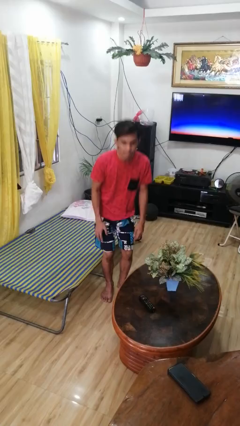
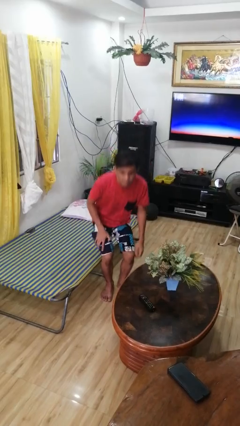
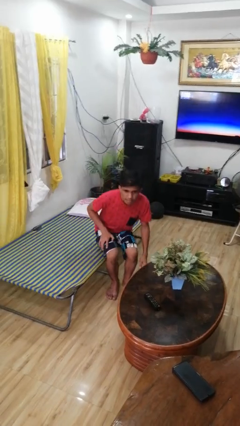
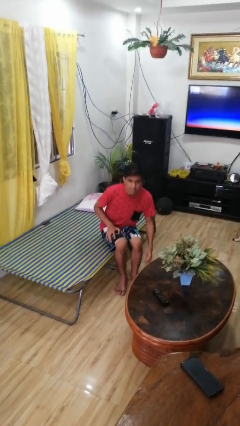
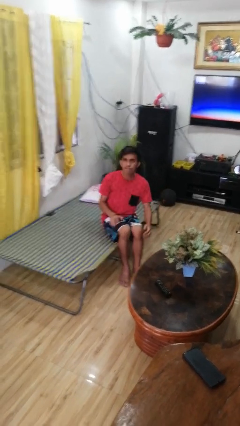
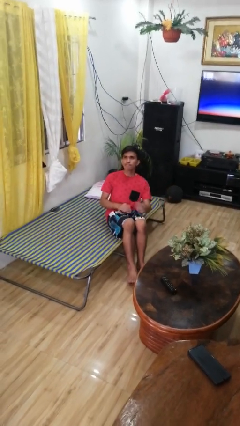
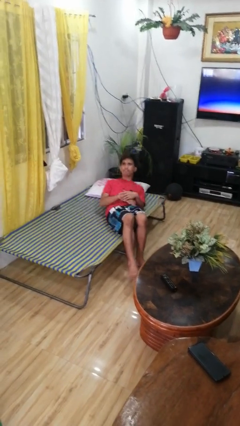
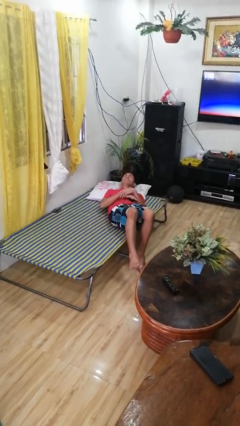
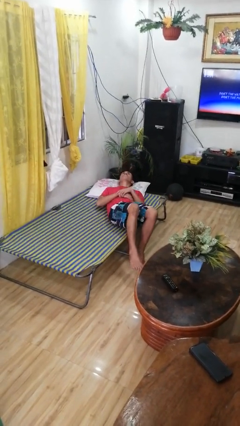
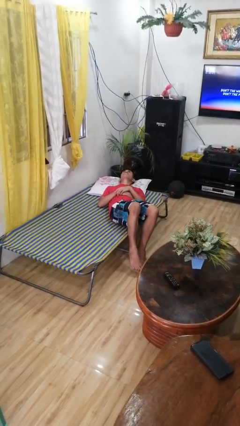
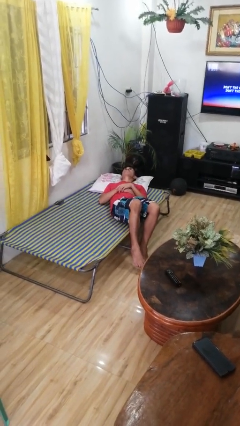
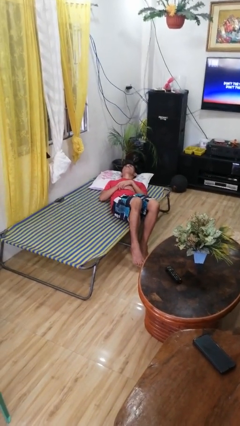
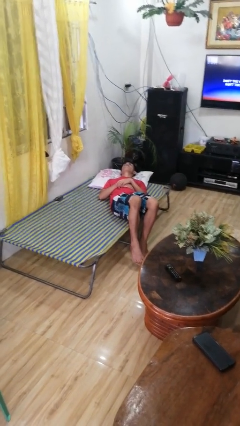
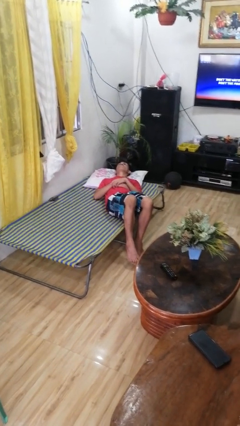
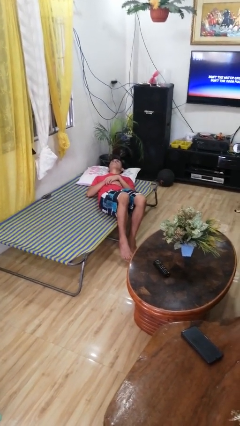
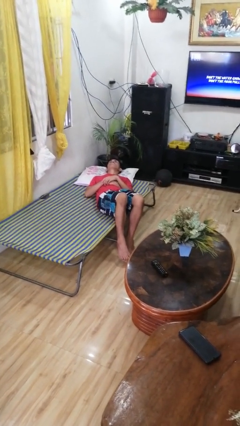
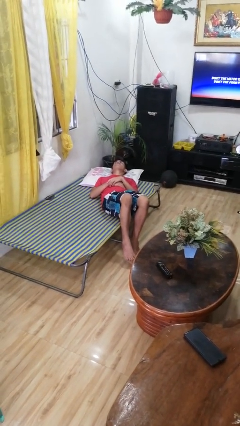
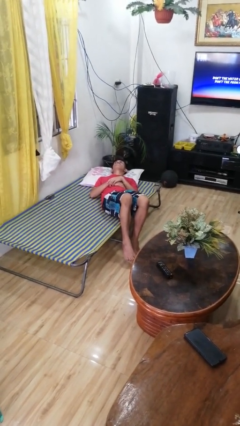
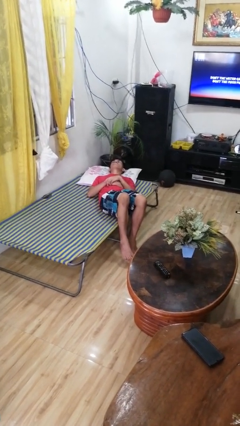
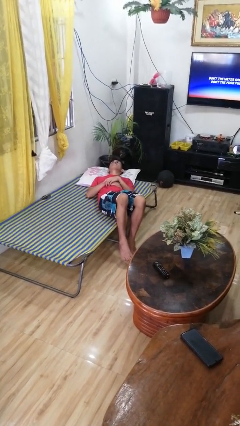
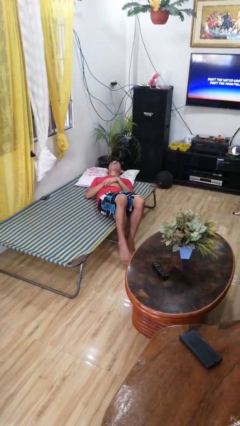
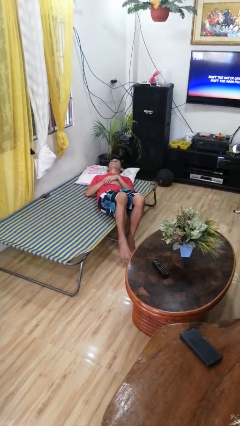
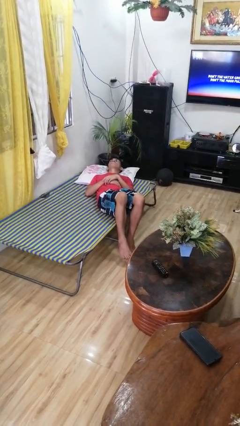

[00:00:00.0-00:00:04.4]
person lies down on bed

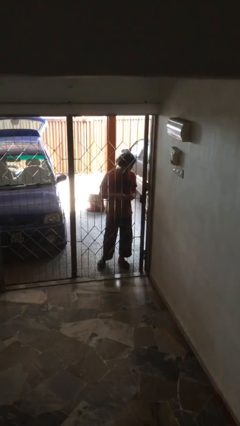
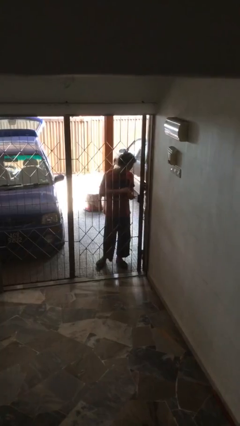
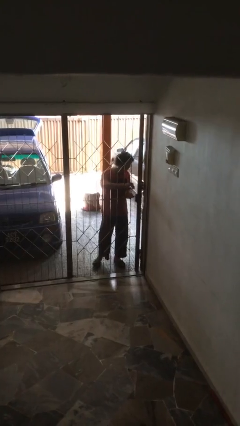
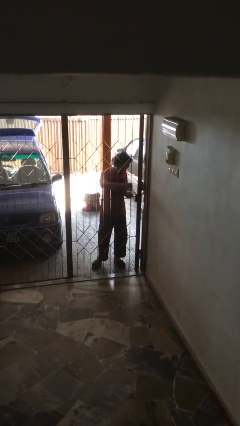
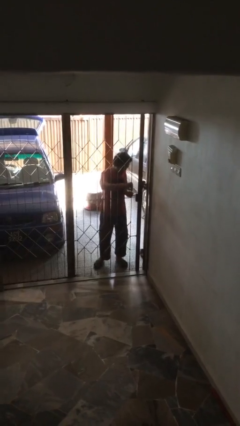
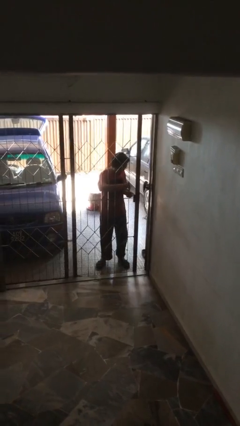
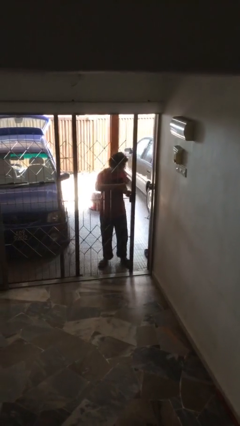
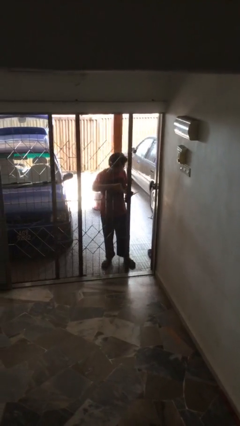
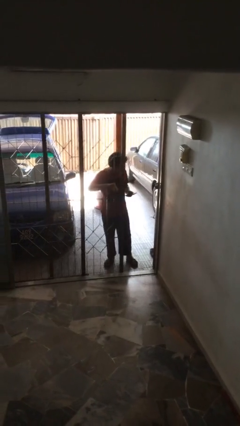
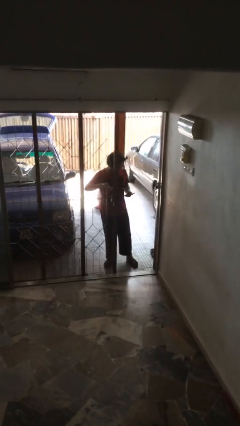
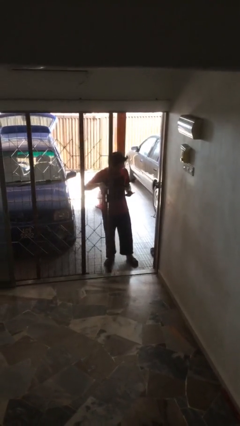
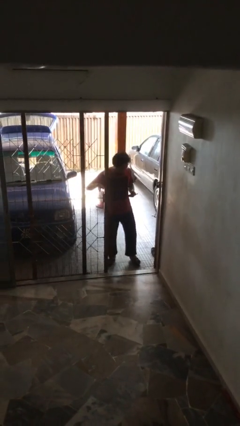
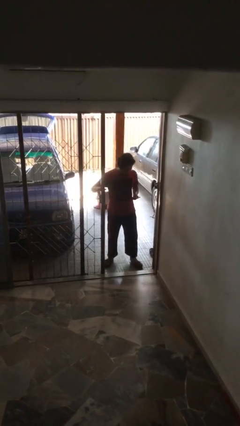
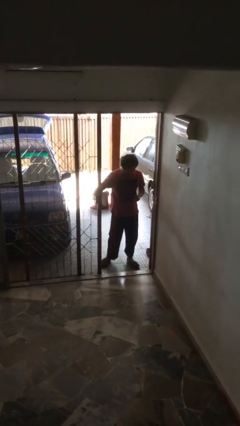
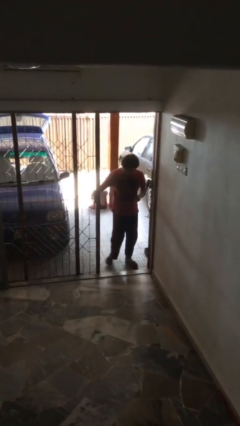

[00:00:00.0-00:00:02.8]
person opens facility door

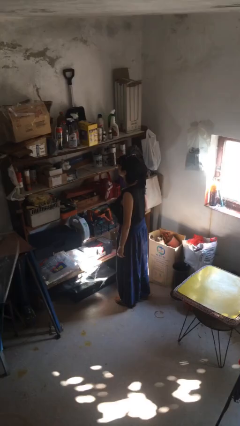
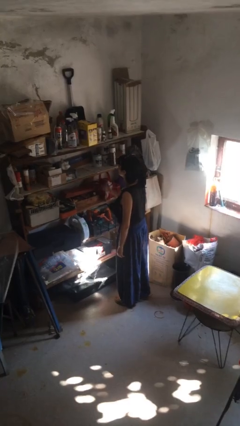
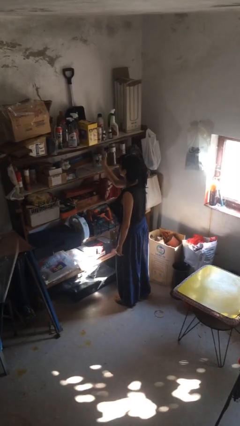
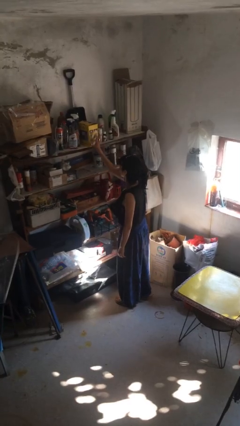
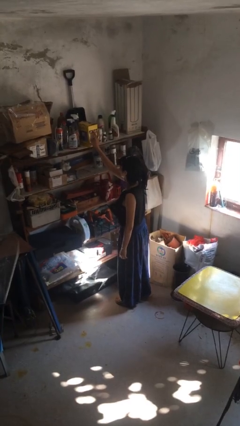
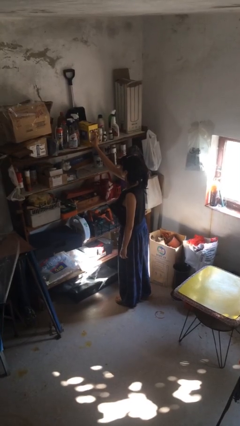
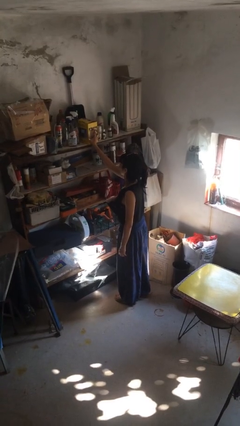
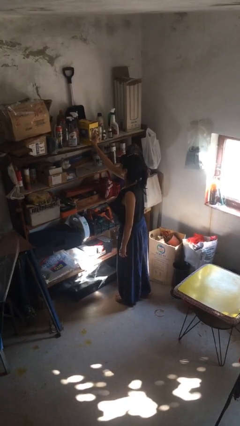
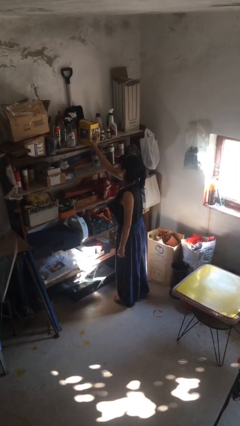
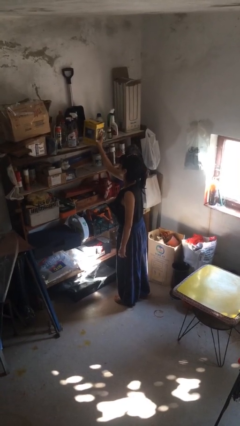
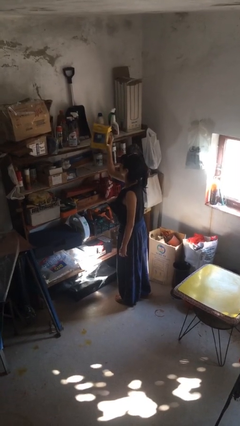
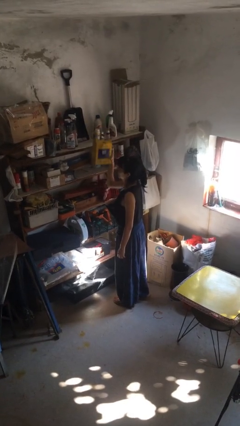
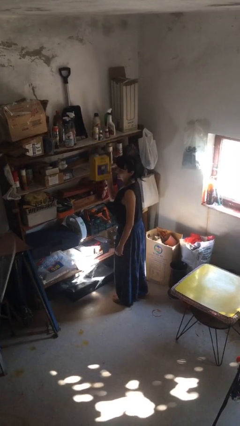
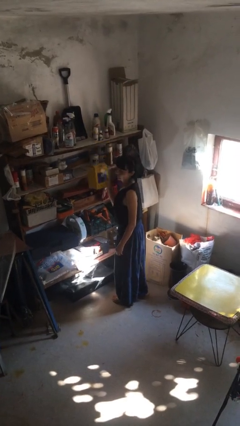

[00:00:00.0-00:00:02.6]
person picks up object from shelf

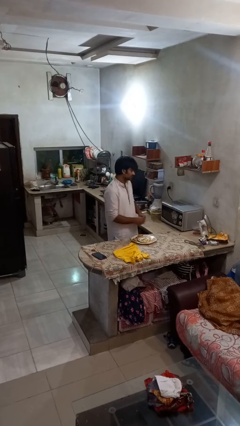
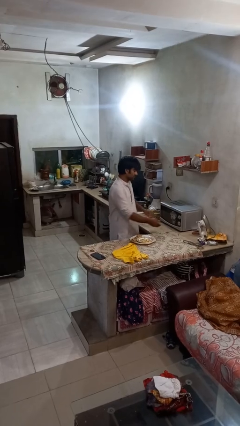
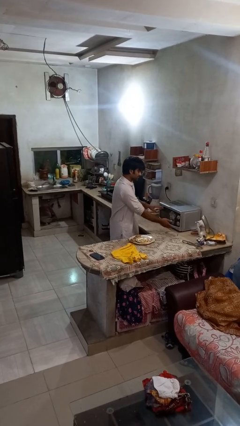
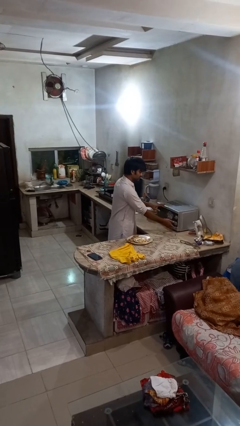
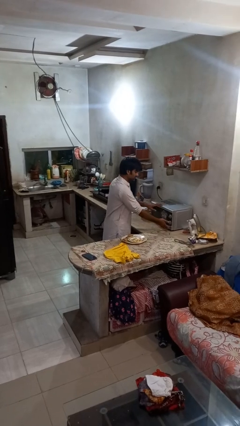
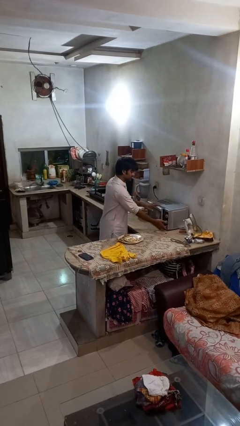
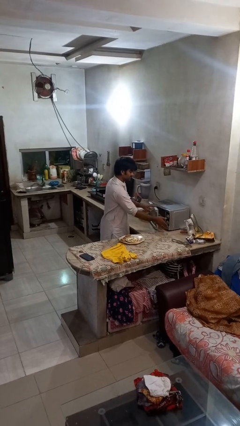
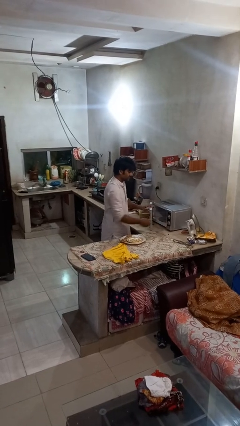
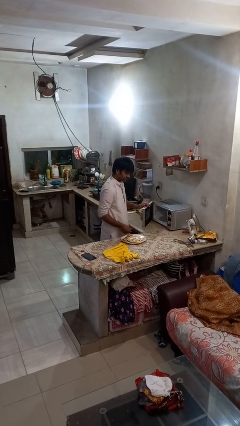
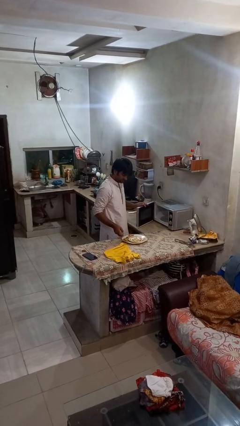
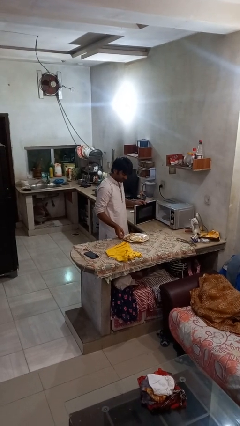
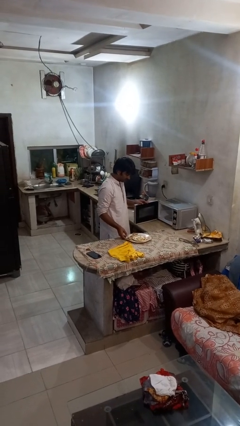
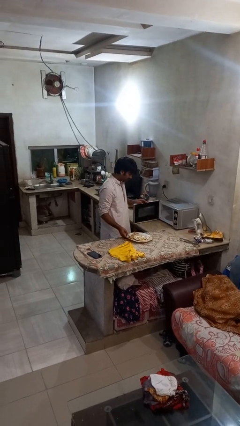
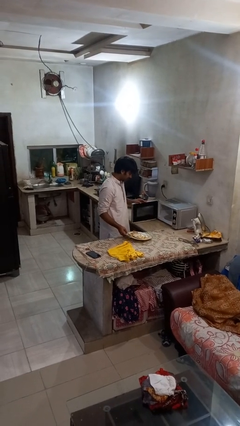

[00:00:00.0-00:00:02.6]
person opens microwave

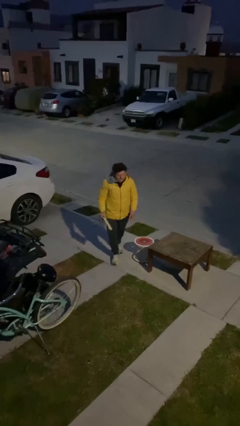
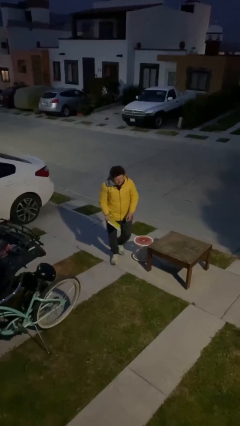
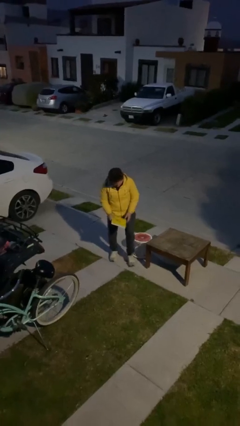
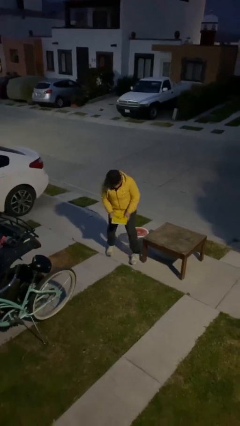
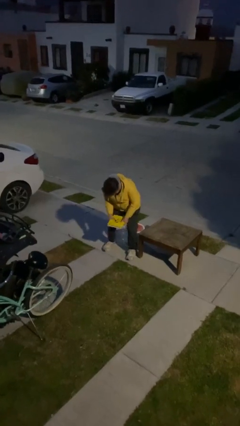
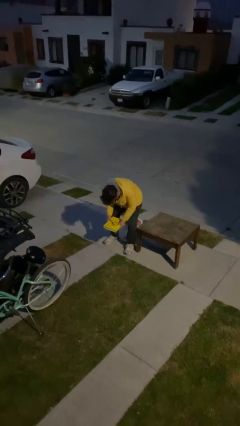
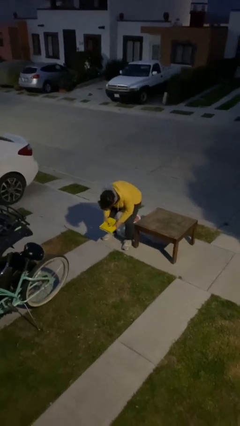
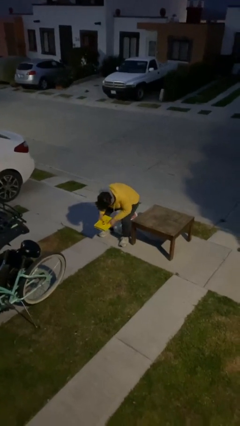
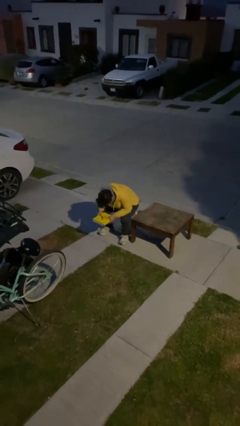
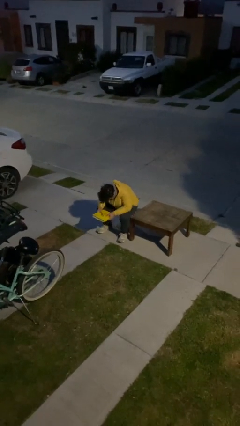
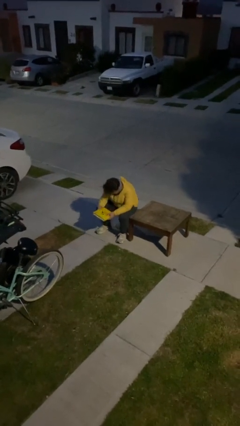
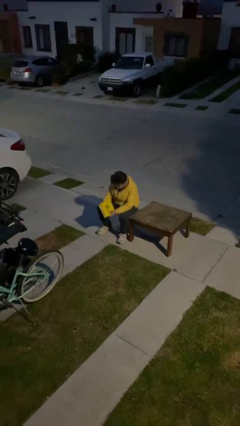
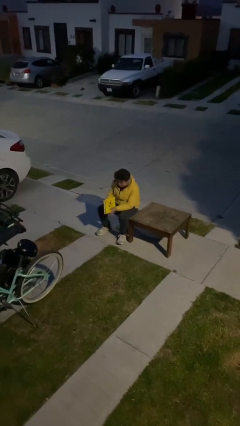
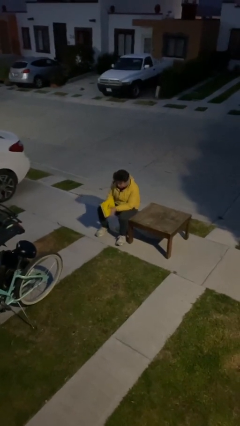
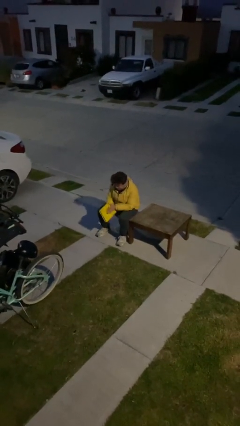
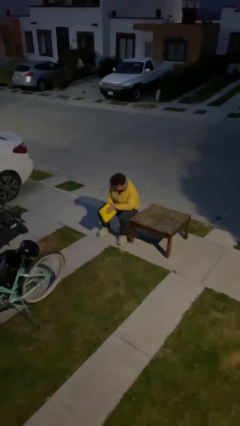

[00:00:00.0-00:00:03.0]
person sits down

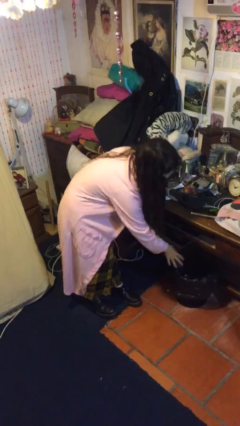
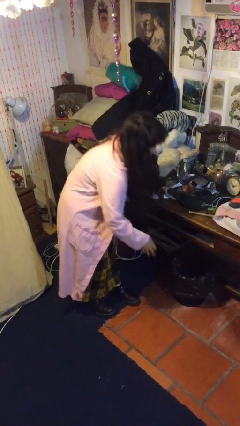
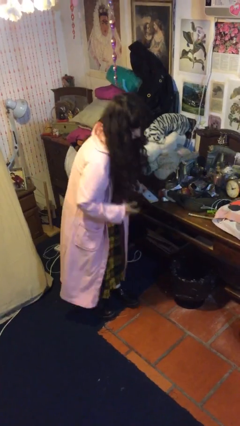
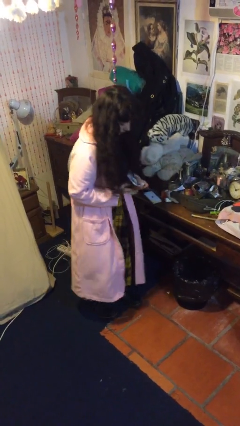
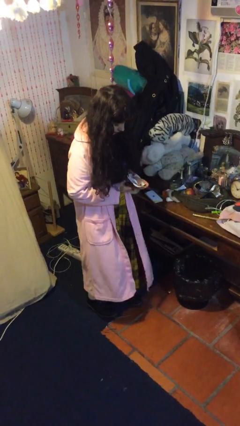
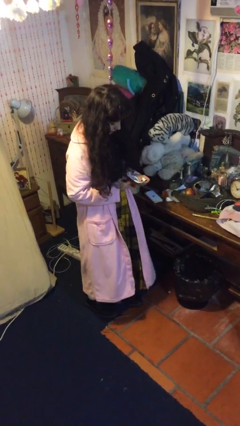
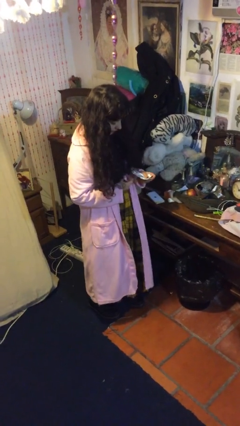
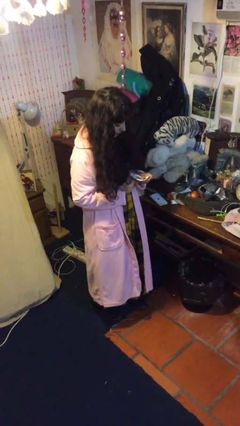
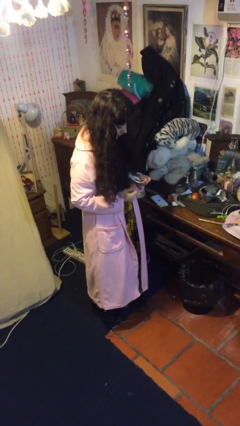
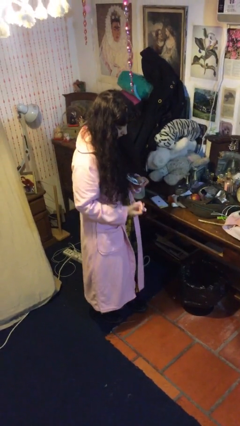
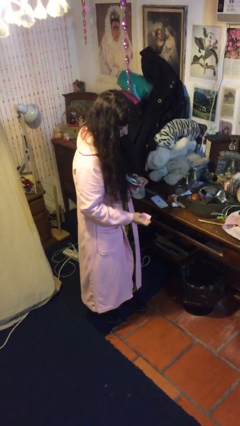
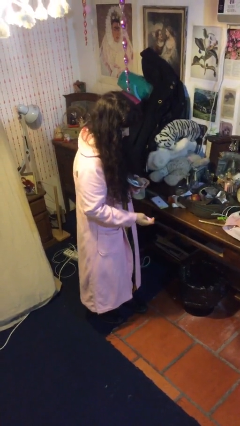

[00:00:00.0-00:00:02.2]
person discards trash
